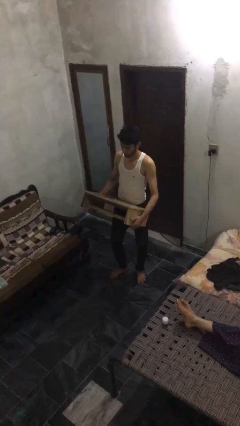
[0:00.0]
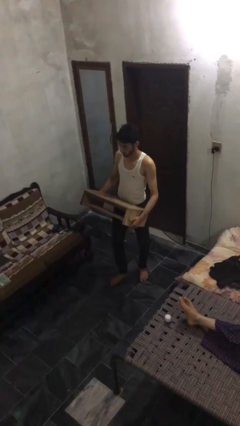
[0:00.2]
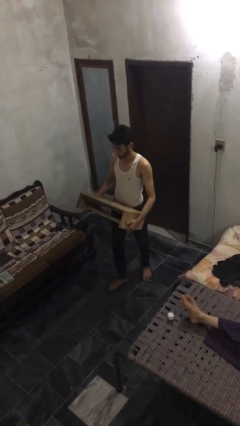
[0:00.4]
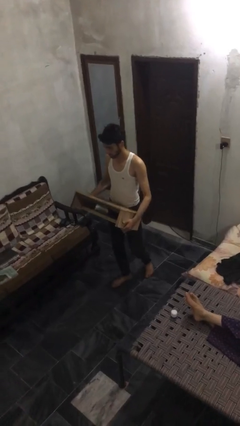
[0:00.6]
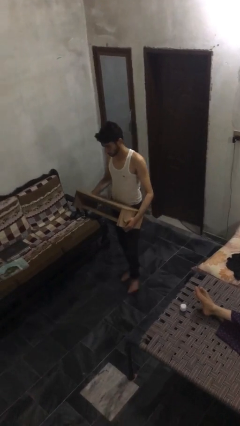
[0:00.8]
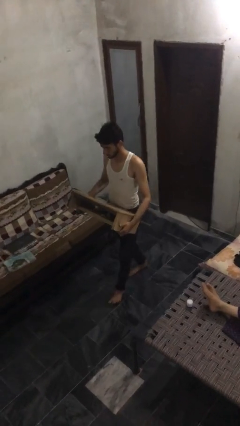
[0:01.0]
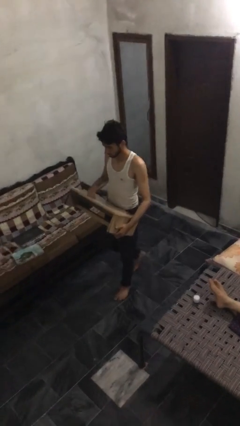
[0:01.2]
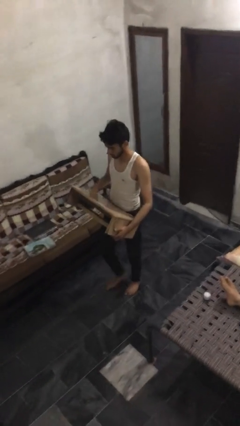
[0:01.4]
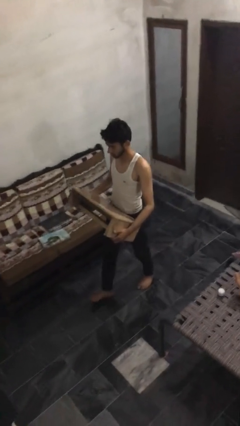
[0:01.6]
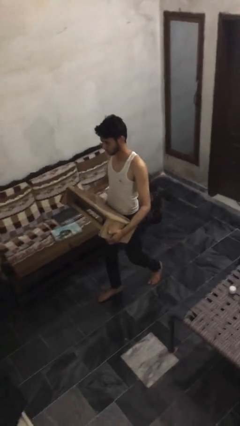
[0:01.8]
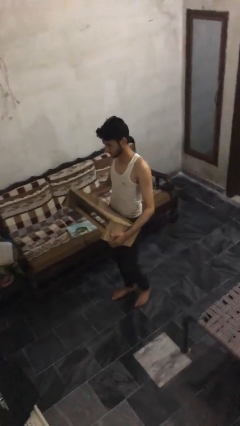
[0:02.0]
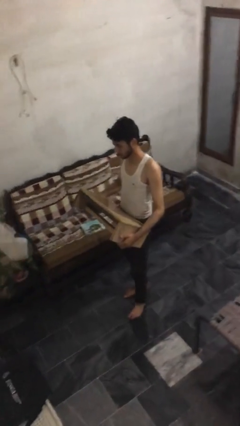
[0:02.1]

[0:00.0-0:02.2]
person carries heavy object

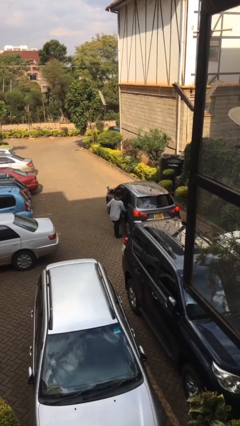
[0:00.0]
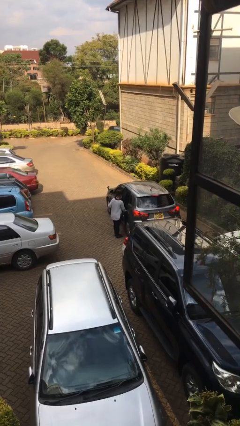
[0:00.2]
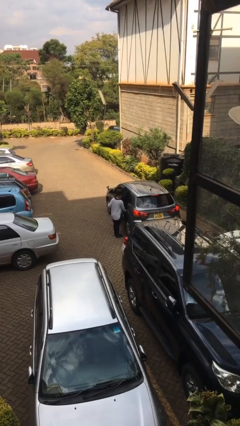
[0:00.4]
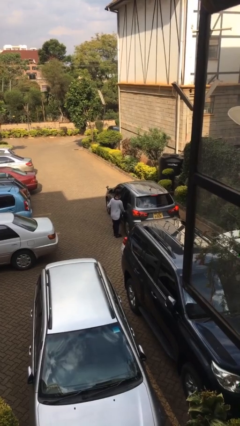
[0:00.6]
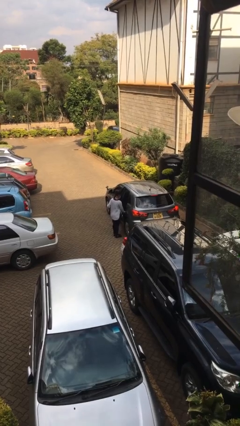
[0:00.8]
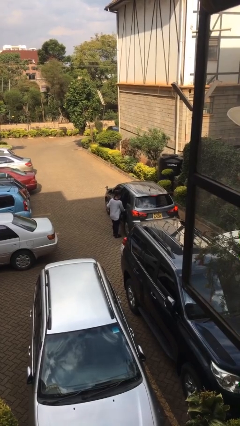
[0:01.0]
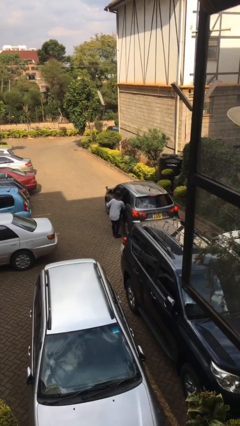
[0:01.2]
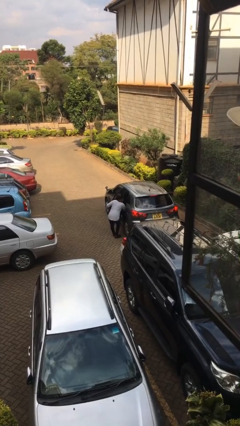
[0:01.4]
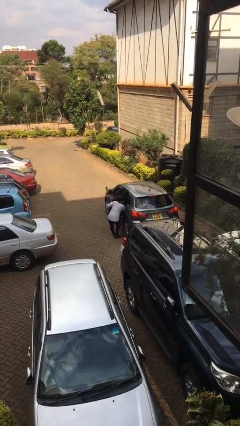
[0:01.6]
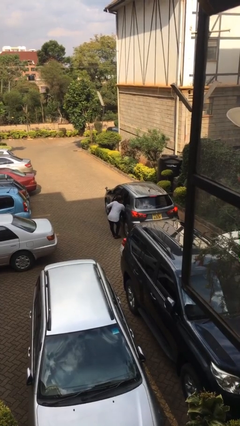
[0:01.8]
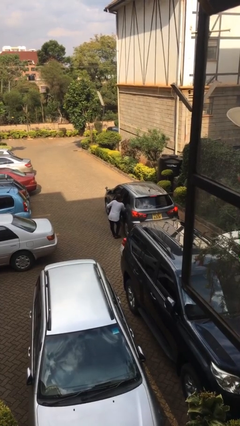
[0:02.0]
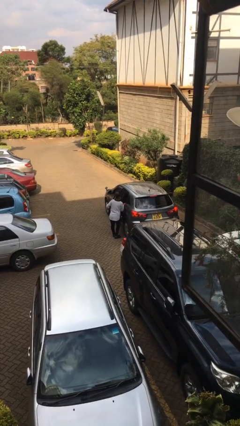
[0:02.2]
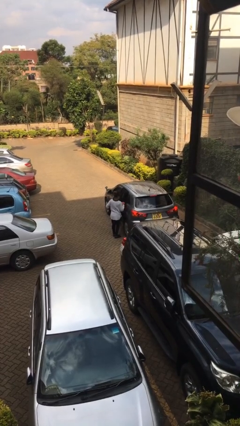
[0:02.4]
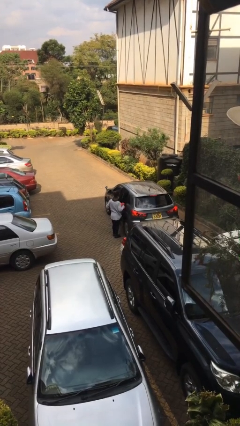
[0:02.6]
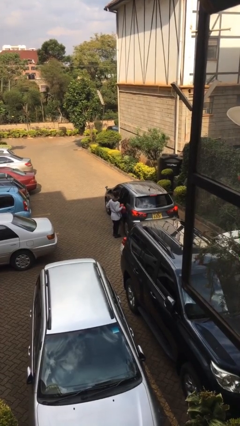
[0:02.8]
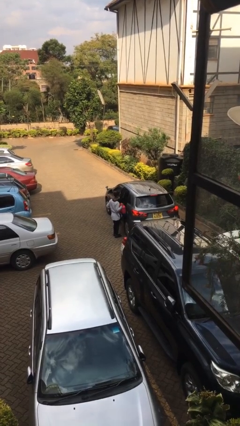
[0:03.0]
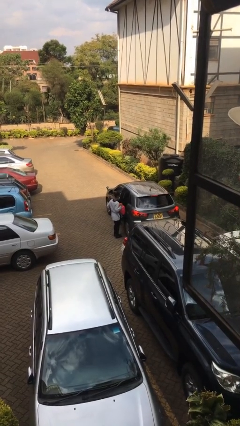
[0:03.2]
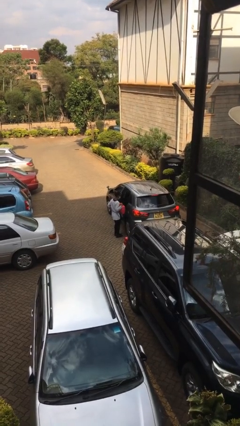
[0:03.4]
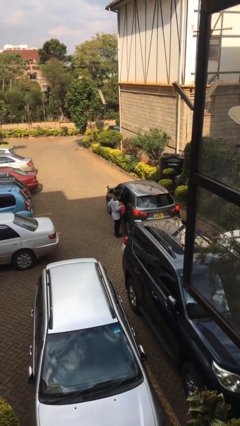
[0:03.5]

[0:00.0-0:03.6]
person unloads car

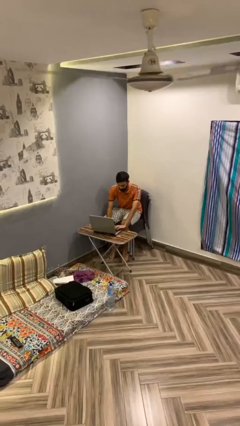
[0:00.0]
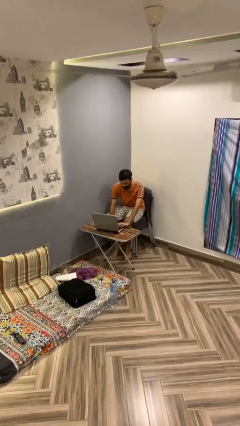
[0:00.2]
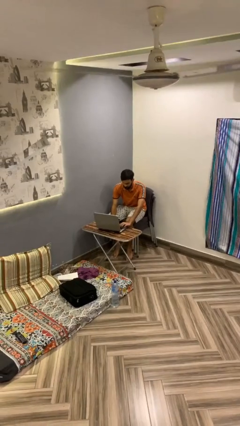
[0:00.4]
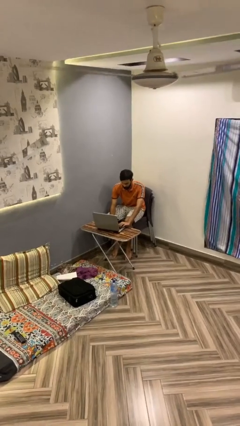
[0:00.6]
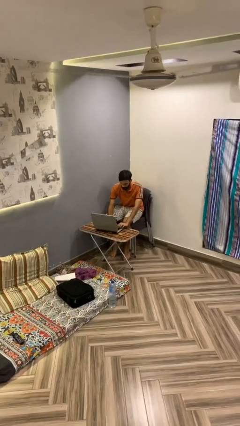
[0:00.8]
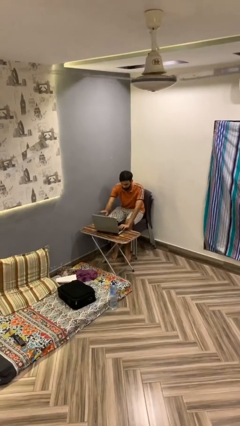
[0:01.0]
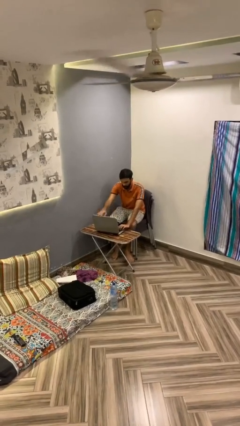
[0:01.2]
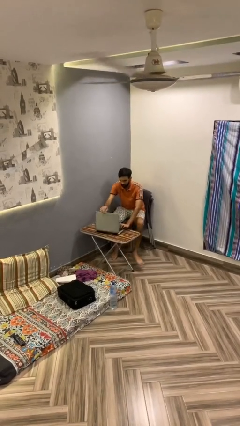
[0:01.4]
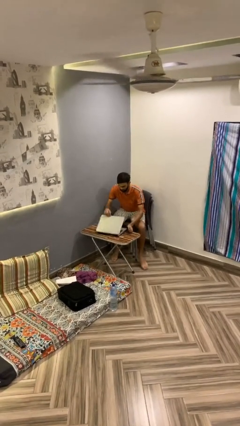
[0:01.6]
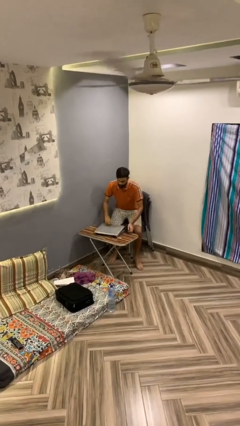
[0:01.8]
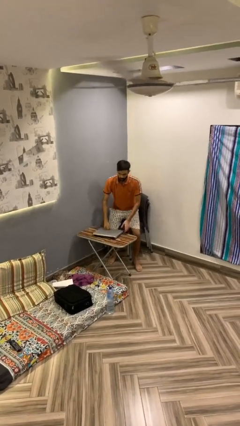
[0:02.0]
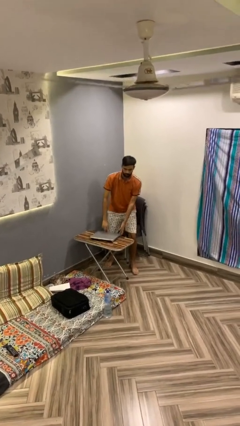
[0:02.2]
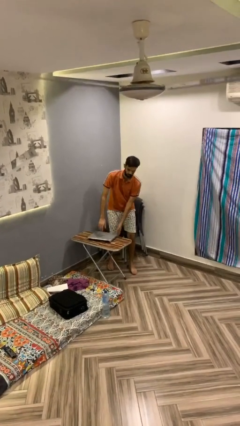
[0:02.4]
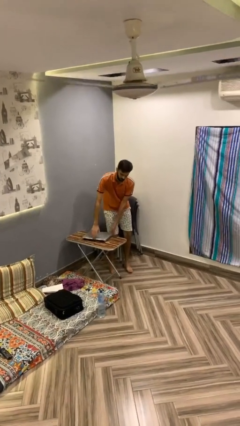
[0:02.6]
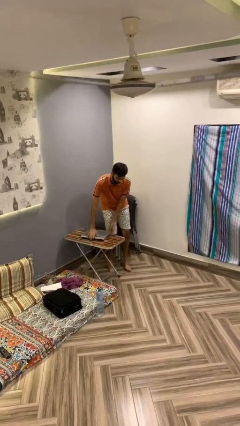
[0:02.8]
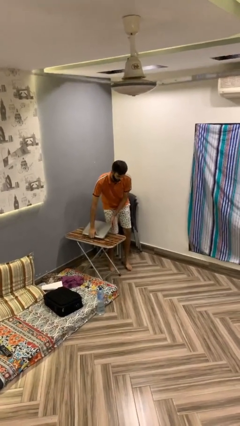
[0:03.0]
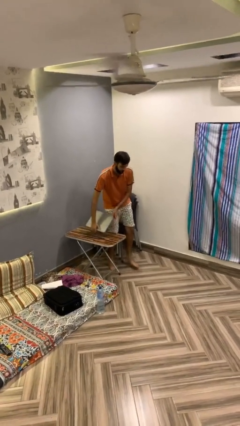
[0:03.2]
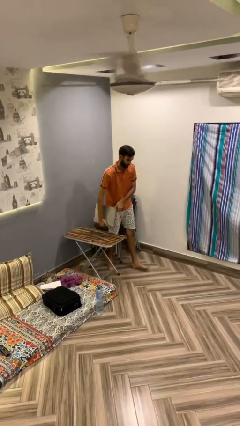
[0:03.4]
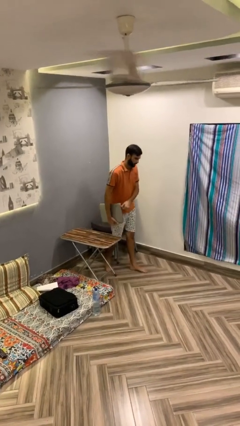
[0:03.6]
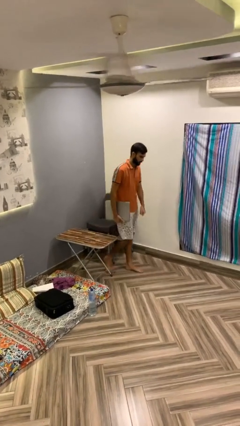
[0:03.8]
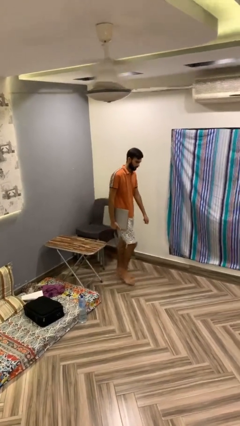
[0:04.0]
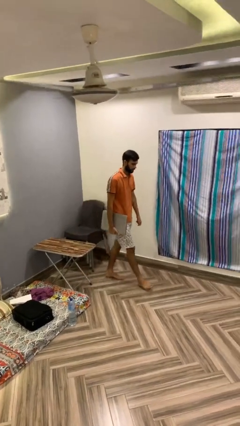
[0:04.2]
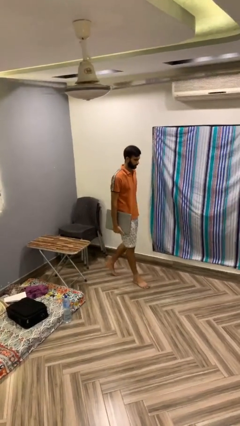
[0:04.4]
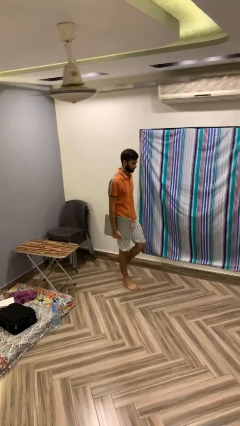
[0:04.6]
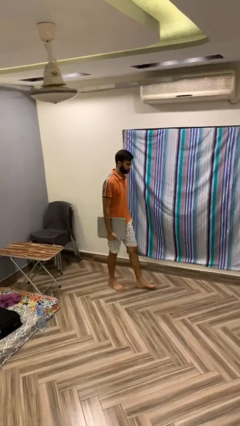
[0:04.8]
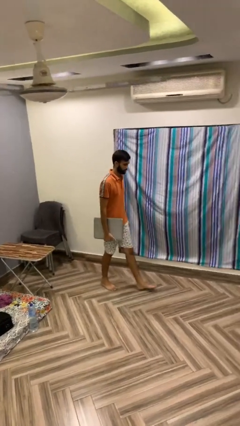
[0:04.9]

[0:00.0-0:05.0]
person stands up

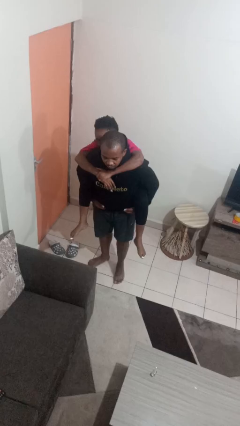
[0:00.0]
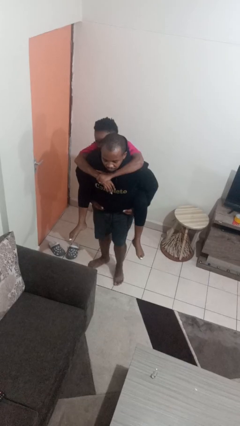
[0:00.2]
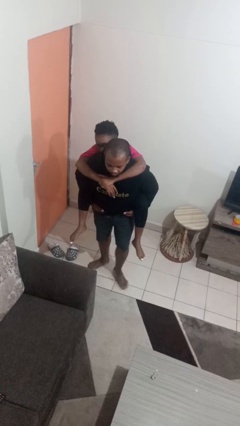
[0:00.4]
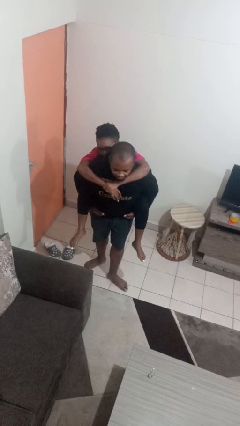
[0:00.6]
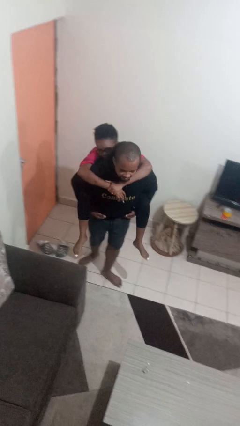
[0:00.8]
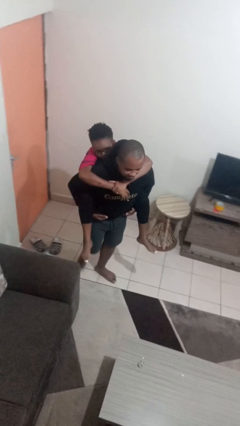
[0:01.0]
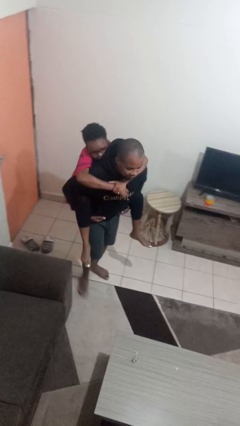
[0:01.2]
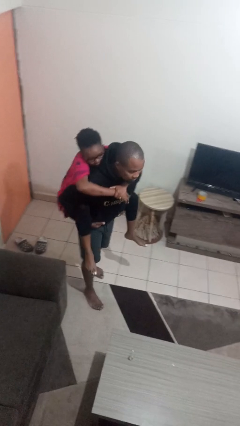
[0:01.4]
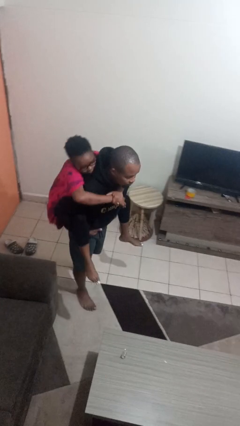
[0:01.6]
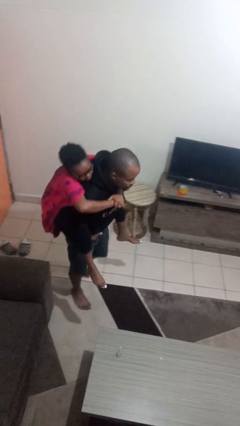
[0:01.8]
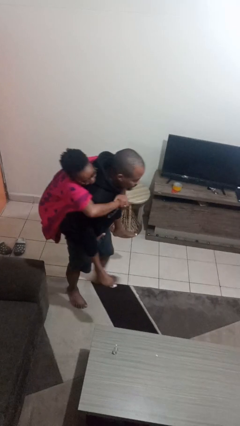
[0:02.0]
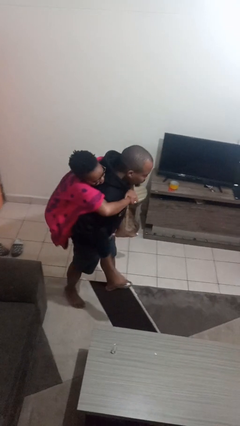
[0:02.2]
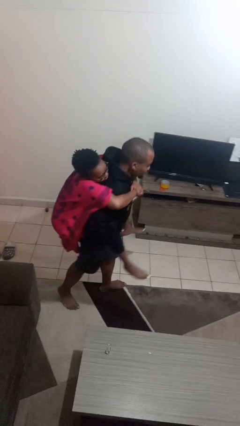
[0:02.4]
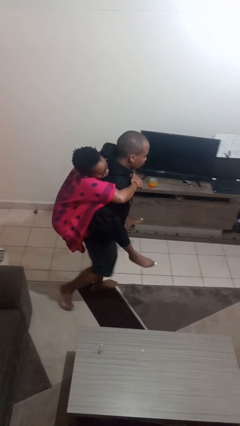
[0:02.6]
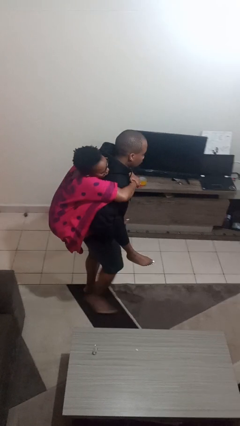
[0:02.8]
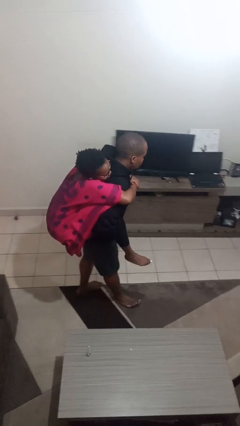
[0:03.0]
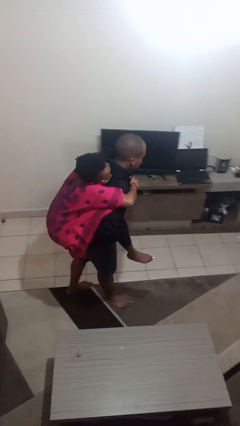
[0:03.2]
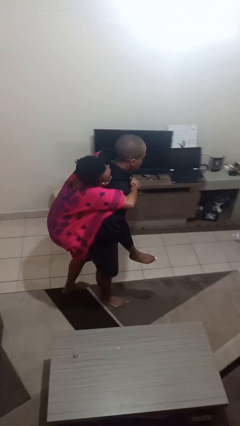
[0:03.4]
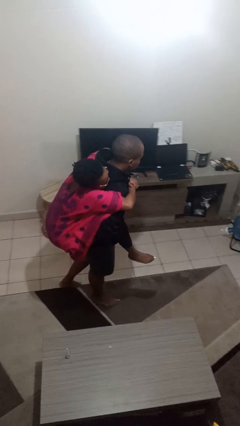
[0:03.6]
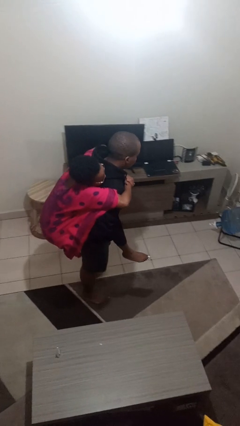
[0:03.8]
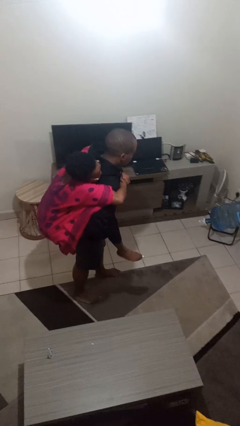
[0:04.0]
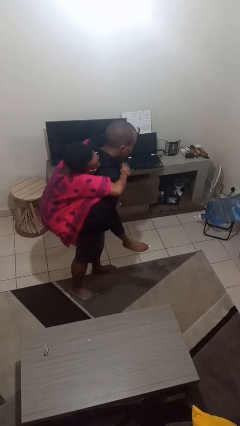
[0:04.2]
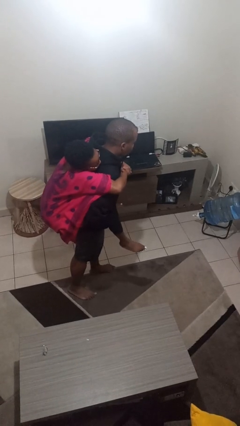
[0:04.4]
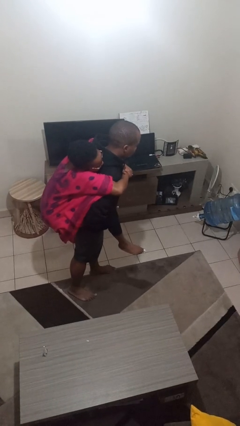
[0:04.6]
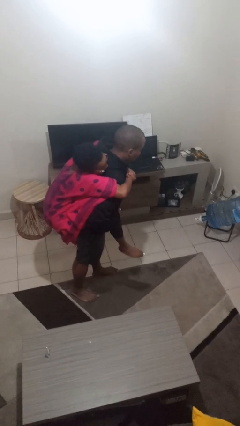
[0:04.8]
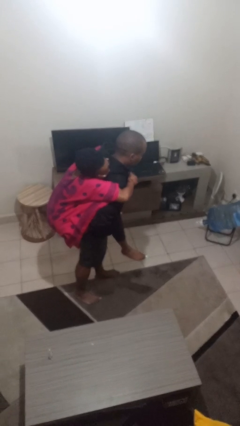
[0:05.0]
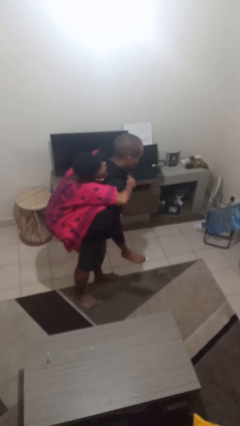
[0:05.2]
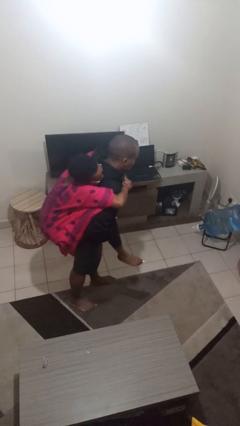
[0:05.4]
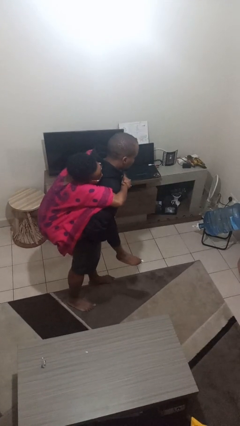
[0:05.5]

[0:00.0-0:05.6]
person carries person on back

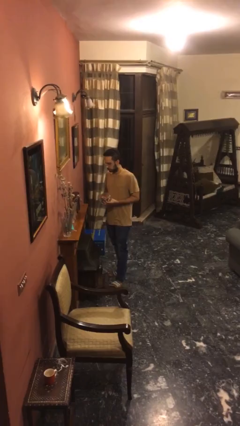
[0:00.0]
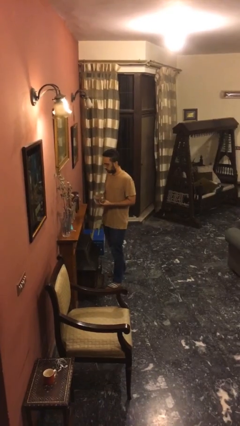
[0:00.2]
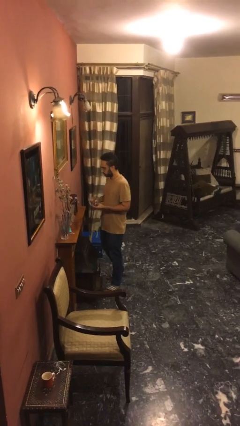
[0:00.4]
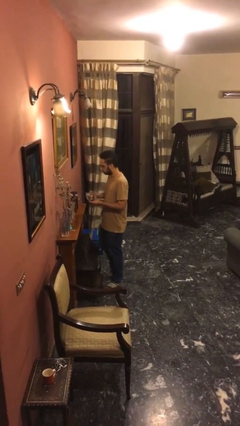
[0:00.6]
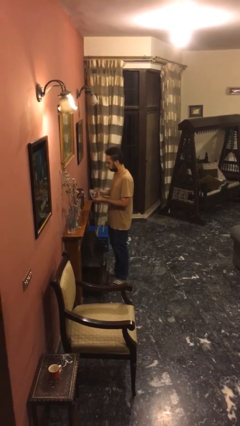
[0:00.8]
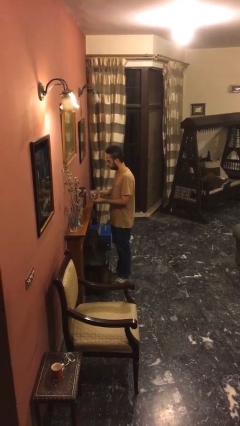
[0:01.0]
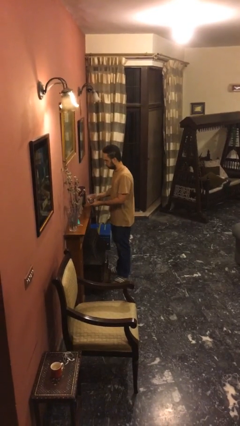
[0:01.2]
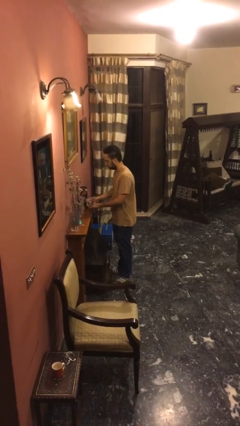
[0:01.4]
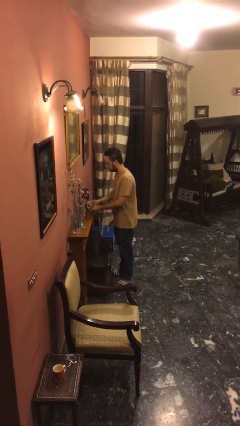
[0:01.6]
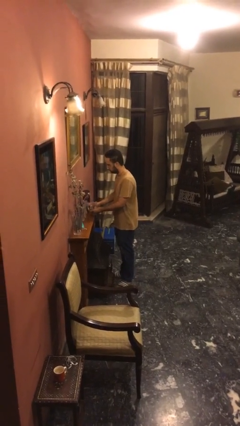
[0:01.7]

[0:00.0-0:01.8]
person puts down object on table
